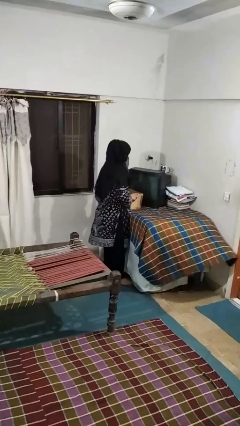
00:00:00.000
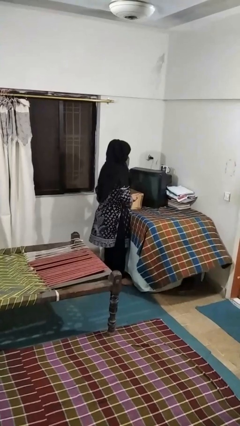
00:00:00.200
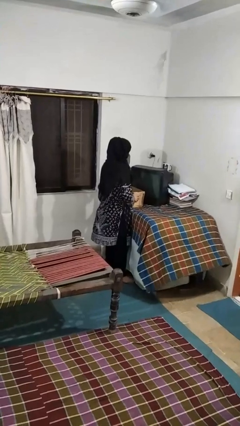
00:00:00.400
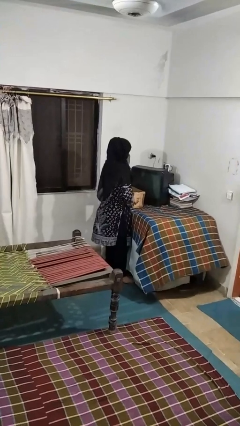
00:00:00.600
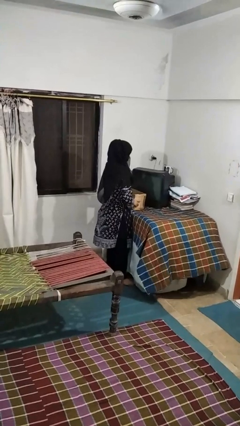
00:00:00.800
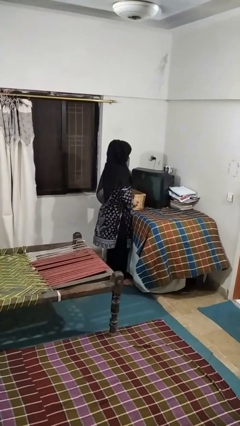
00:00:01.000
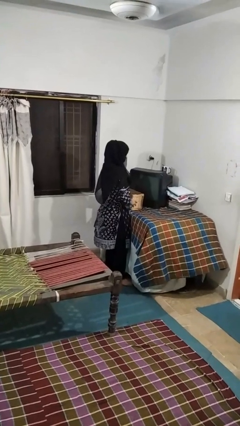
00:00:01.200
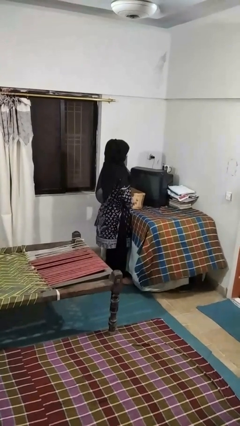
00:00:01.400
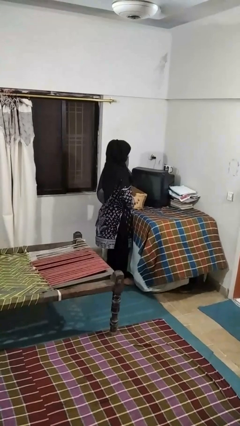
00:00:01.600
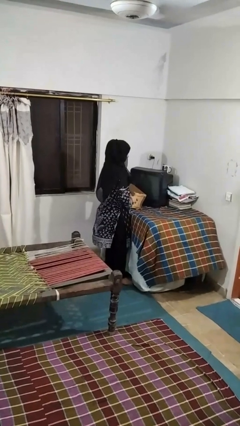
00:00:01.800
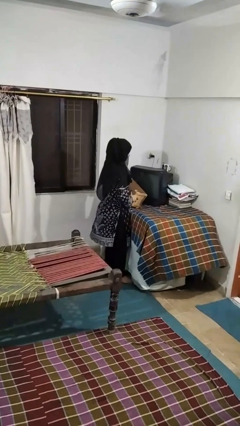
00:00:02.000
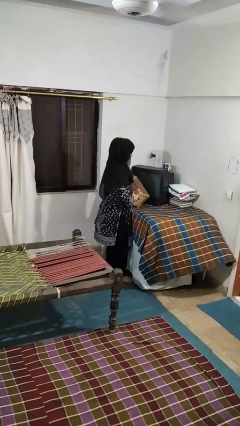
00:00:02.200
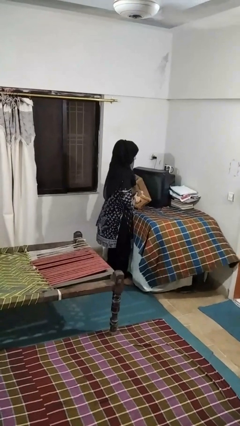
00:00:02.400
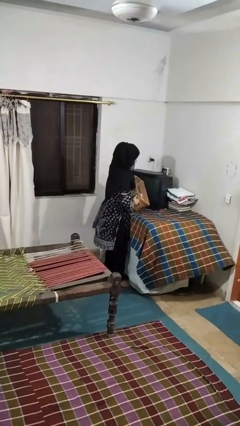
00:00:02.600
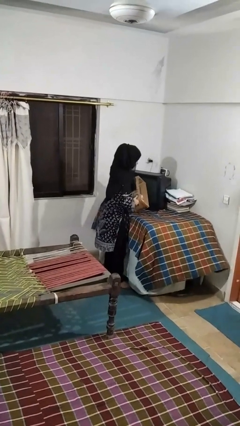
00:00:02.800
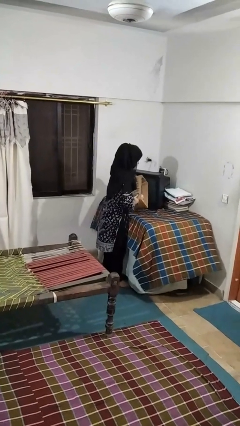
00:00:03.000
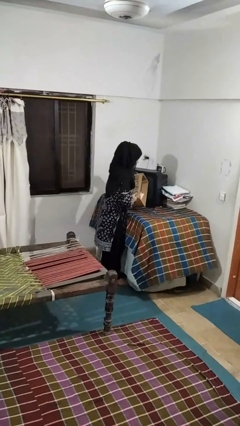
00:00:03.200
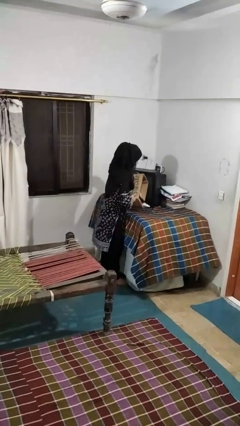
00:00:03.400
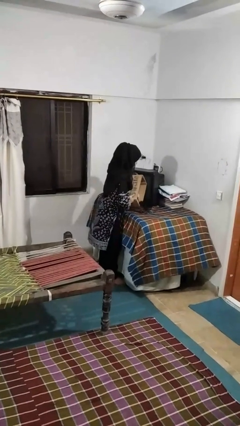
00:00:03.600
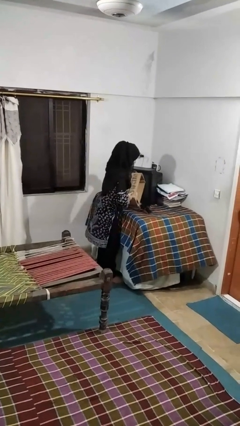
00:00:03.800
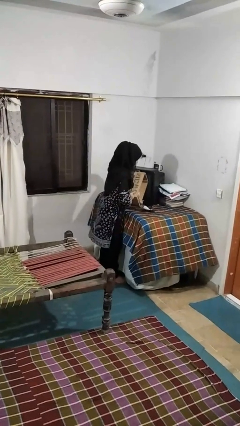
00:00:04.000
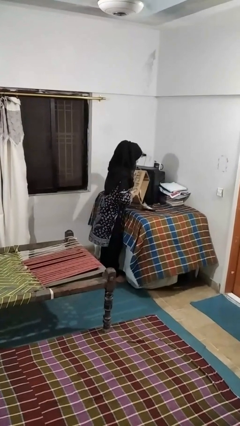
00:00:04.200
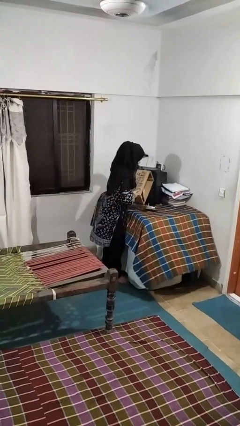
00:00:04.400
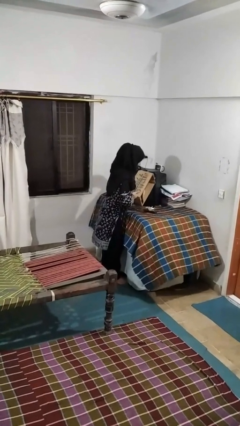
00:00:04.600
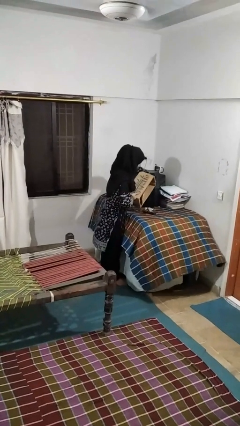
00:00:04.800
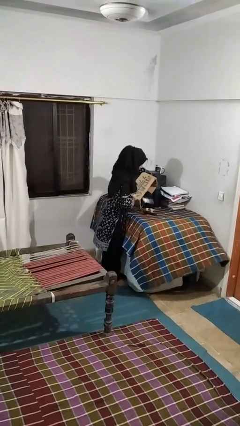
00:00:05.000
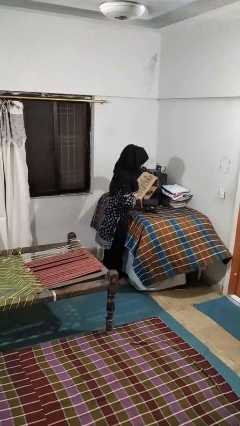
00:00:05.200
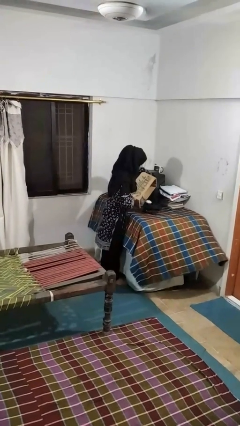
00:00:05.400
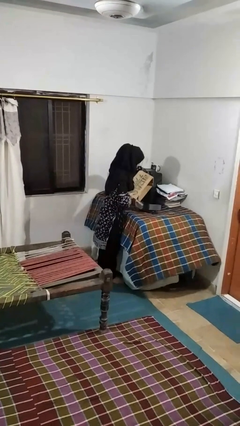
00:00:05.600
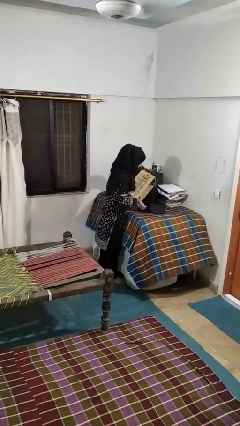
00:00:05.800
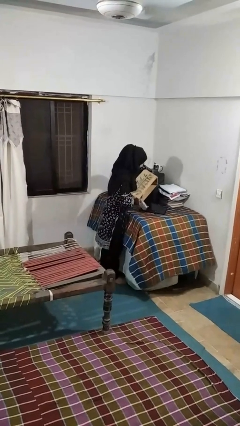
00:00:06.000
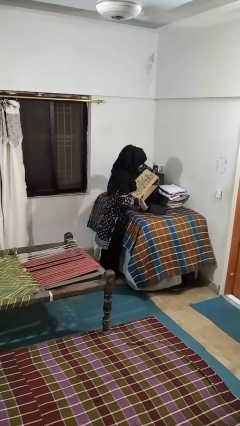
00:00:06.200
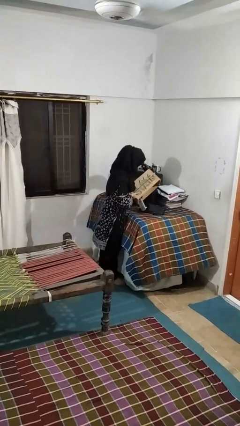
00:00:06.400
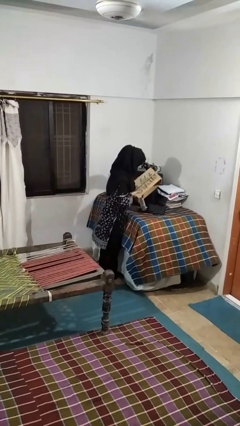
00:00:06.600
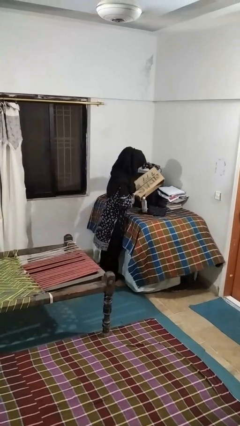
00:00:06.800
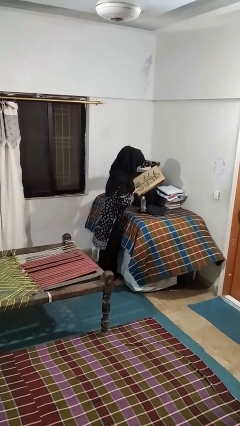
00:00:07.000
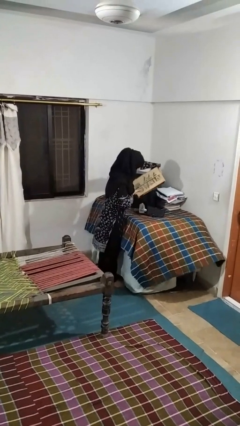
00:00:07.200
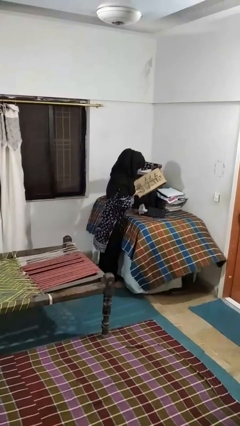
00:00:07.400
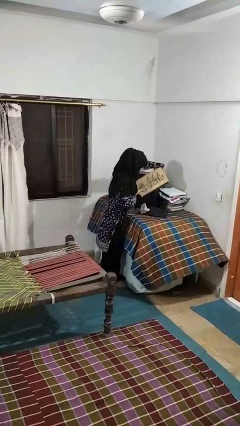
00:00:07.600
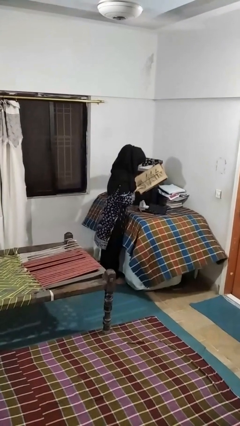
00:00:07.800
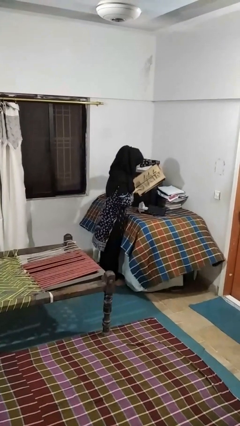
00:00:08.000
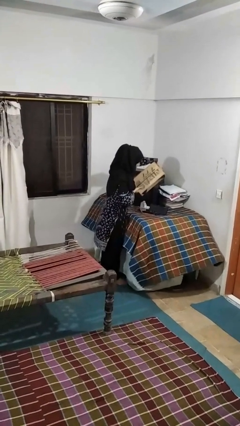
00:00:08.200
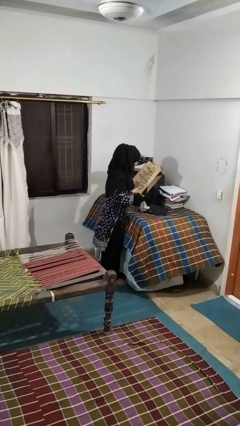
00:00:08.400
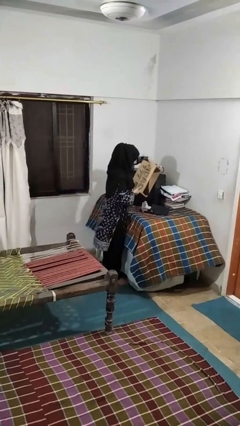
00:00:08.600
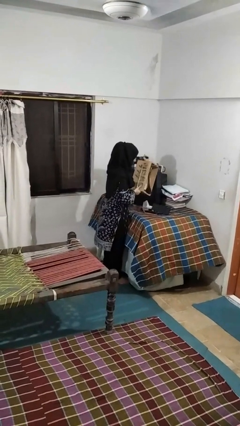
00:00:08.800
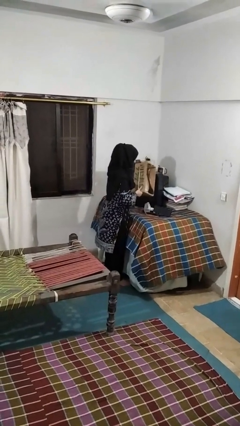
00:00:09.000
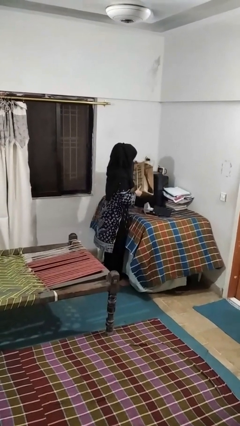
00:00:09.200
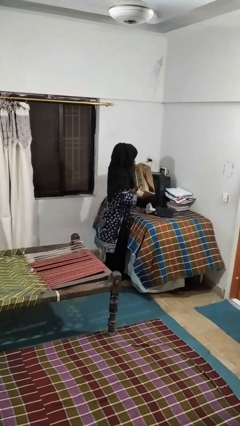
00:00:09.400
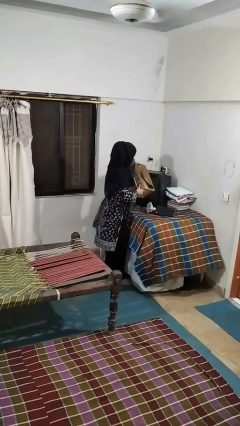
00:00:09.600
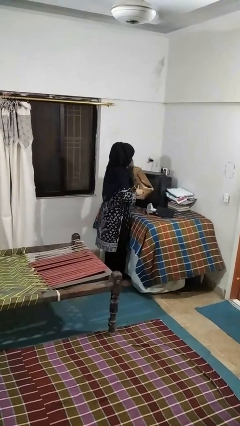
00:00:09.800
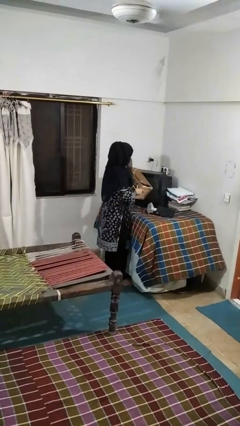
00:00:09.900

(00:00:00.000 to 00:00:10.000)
person unloads box onto table

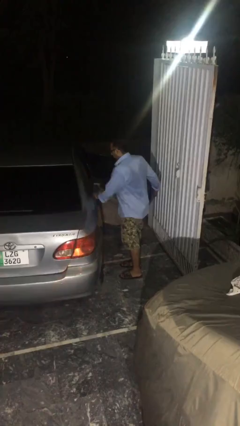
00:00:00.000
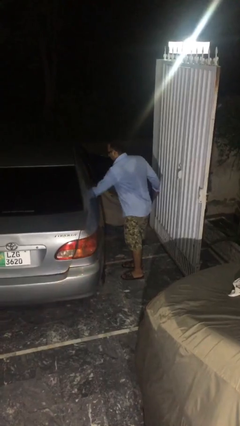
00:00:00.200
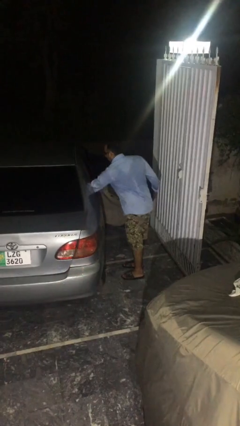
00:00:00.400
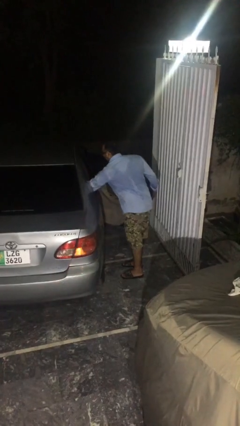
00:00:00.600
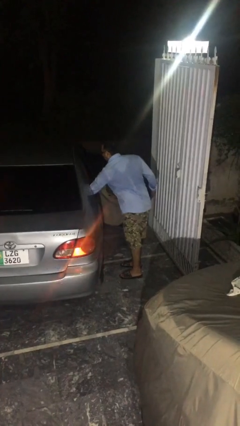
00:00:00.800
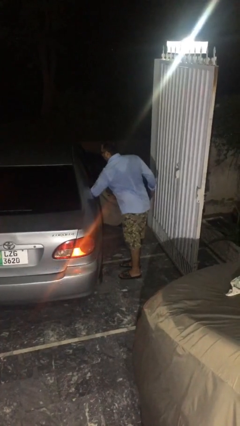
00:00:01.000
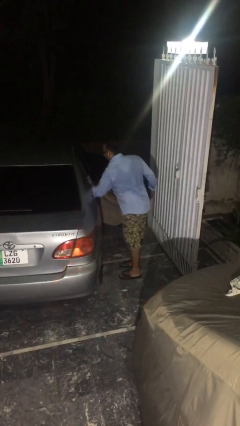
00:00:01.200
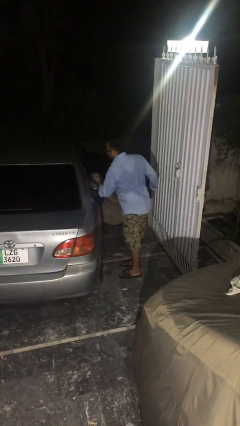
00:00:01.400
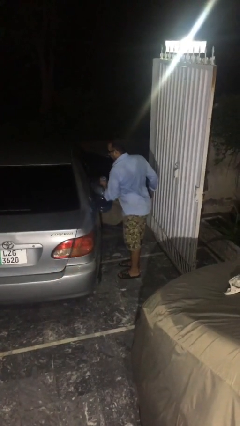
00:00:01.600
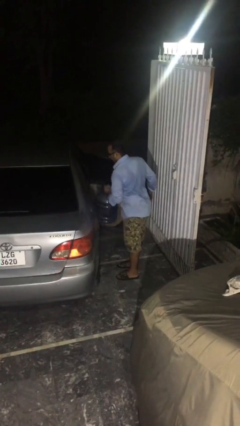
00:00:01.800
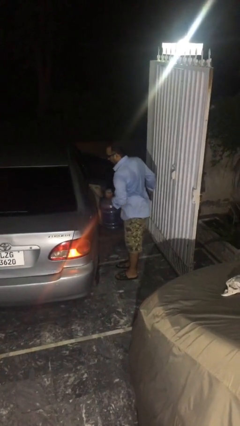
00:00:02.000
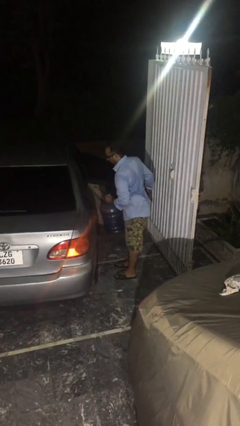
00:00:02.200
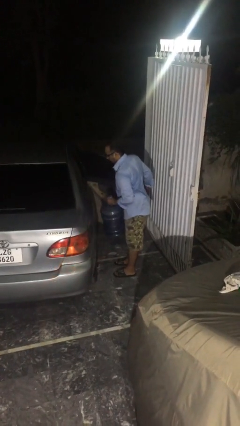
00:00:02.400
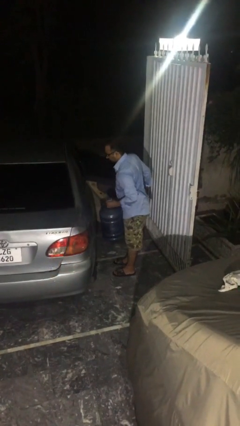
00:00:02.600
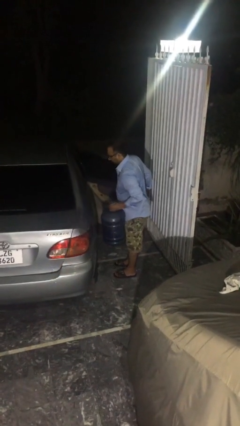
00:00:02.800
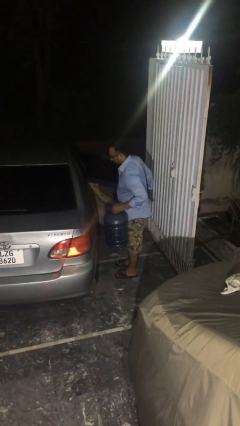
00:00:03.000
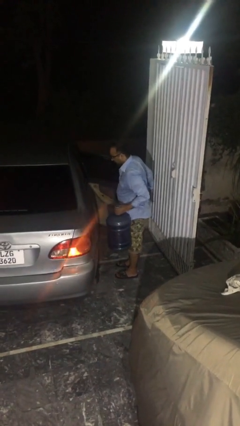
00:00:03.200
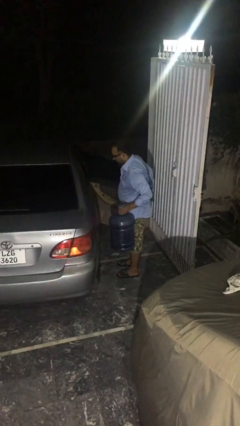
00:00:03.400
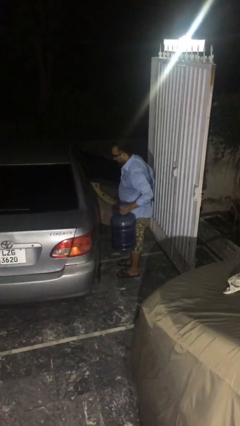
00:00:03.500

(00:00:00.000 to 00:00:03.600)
person unloads car

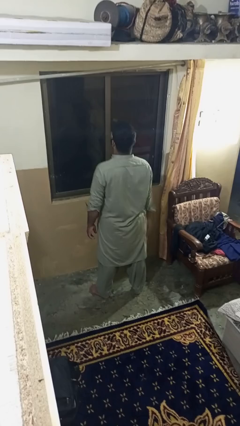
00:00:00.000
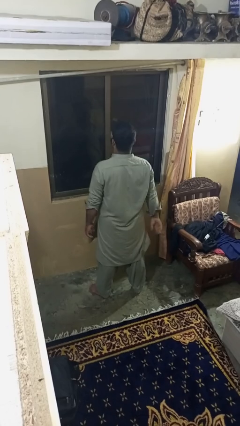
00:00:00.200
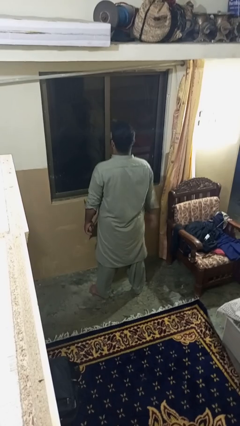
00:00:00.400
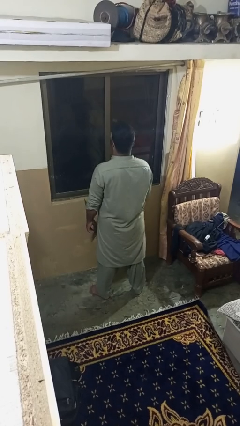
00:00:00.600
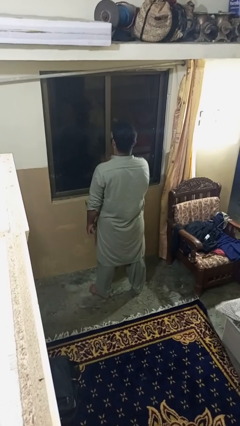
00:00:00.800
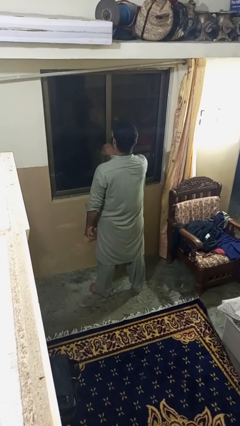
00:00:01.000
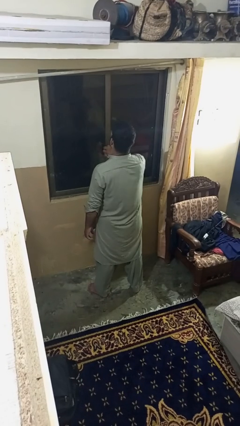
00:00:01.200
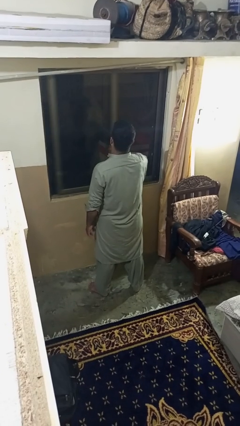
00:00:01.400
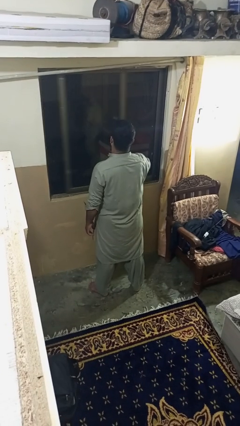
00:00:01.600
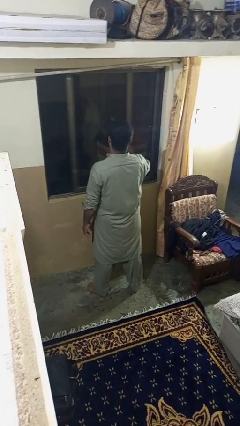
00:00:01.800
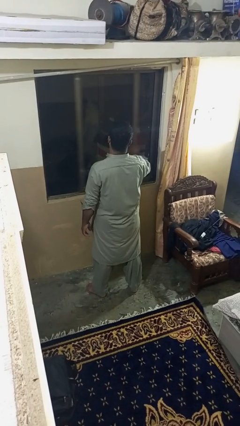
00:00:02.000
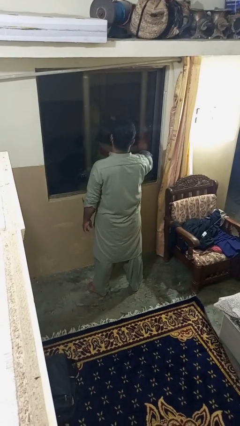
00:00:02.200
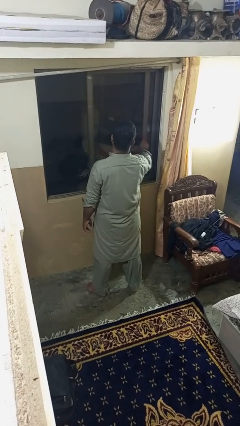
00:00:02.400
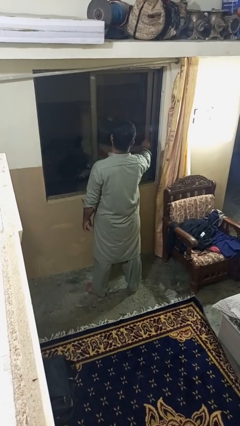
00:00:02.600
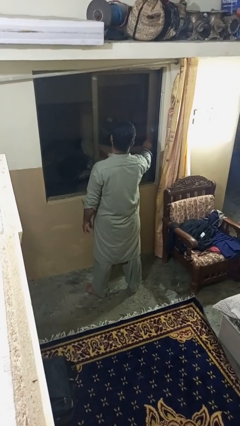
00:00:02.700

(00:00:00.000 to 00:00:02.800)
person opens home window

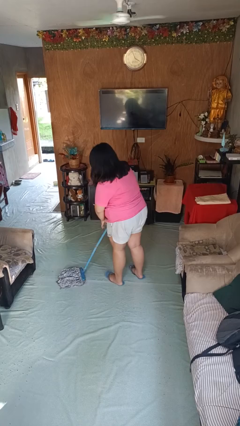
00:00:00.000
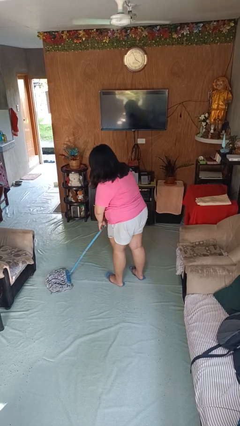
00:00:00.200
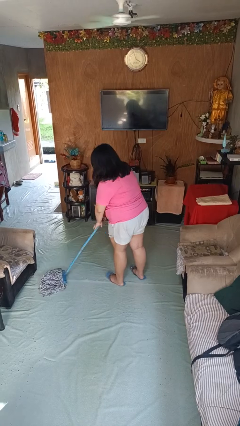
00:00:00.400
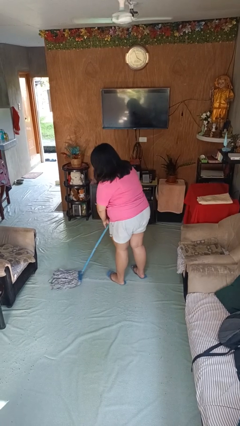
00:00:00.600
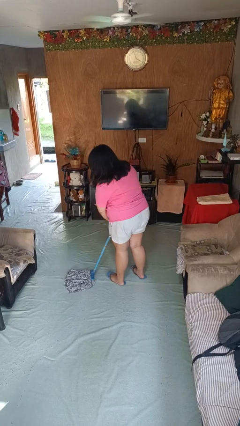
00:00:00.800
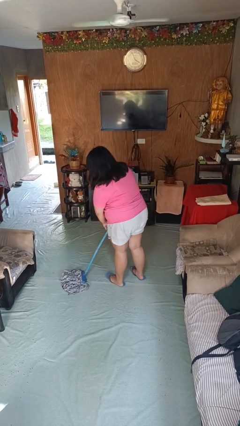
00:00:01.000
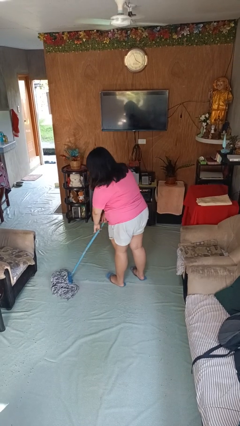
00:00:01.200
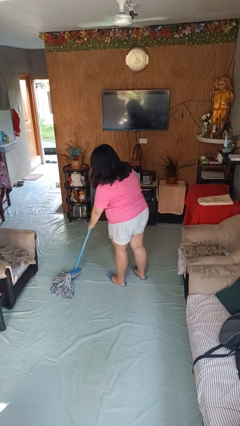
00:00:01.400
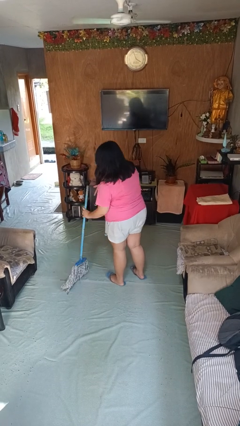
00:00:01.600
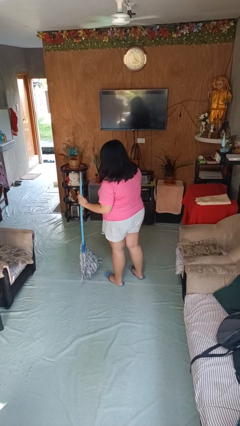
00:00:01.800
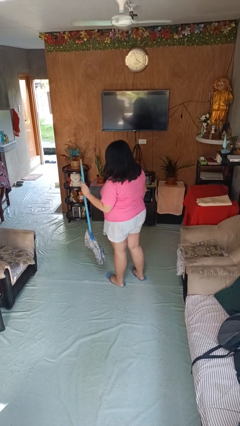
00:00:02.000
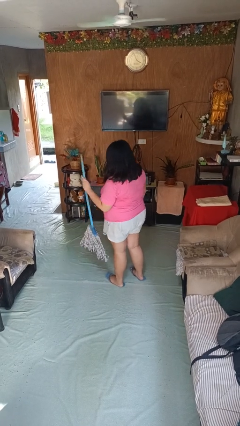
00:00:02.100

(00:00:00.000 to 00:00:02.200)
person mops
